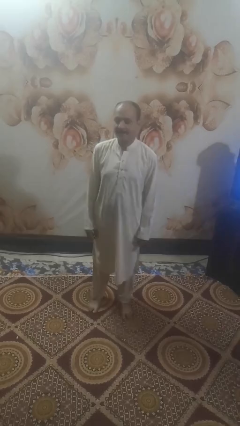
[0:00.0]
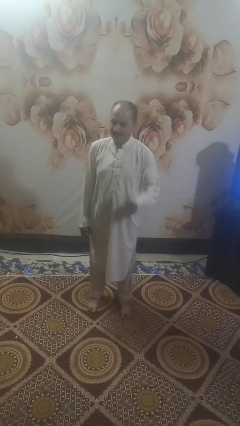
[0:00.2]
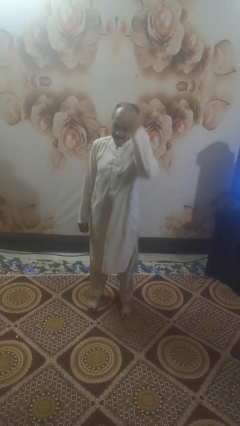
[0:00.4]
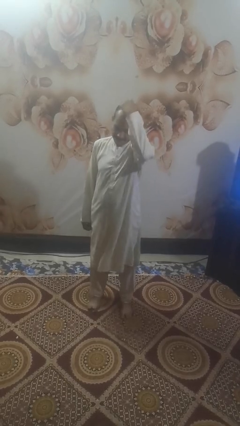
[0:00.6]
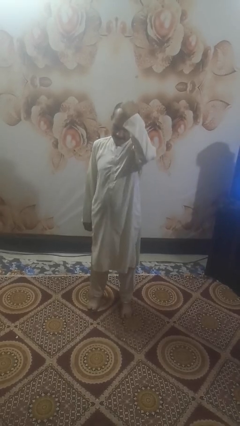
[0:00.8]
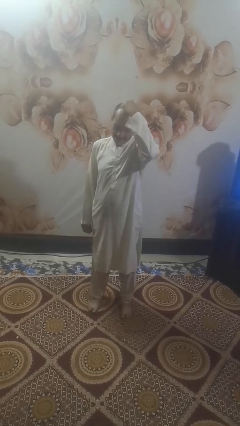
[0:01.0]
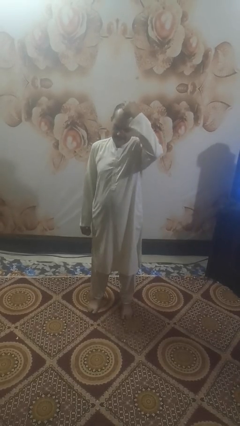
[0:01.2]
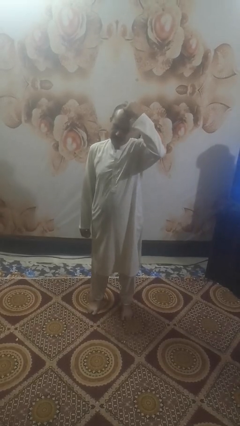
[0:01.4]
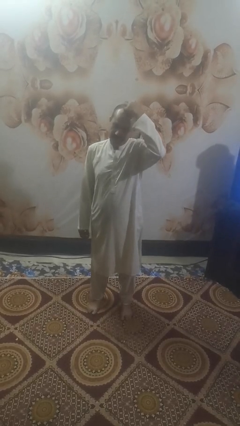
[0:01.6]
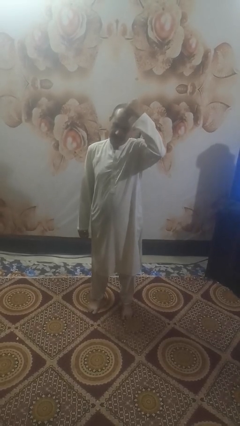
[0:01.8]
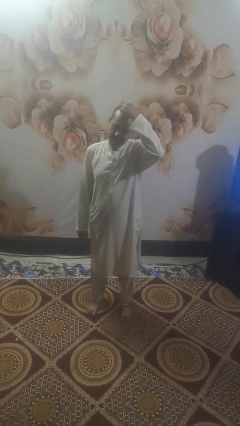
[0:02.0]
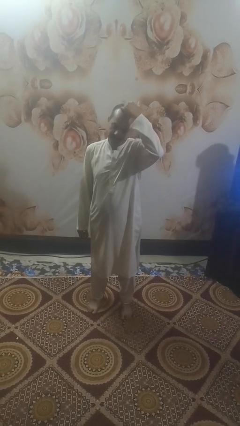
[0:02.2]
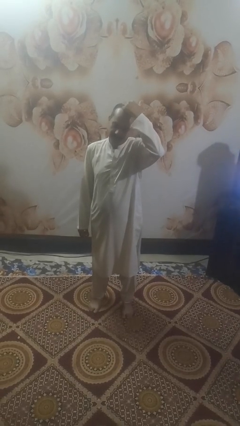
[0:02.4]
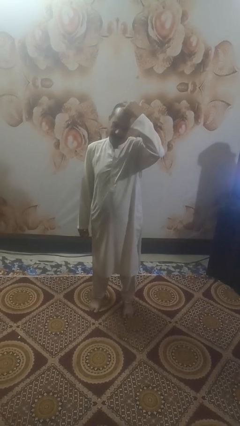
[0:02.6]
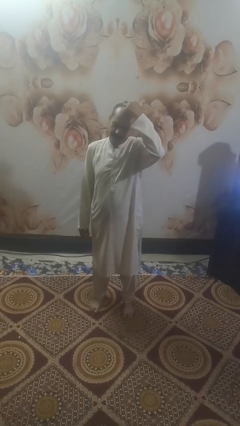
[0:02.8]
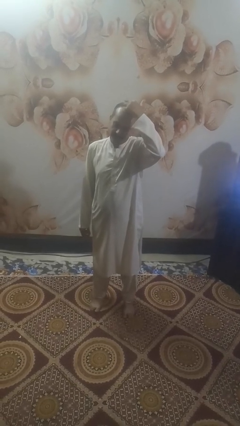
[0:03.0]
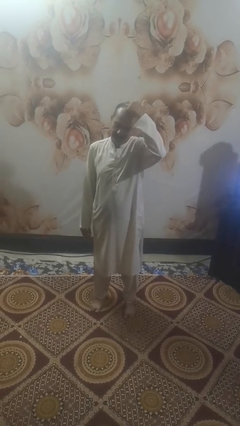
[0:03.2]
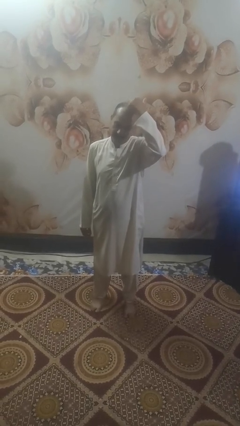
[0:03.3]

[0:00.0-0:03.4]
person scratches face

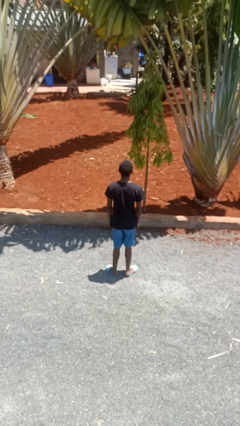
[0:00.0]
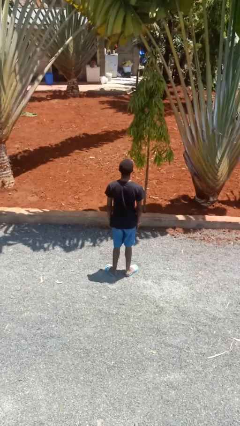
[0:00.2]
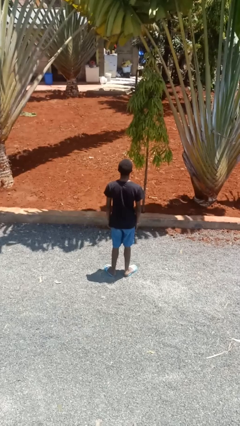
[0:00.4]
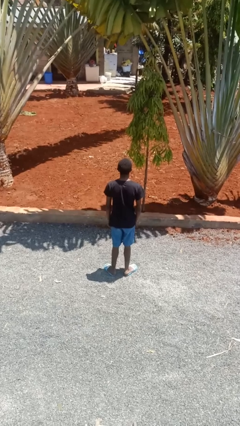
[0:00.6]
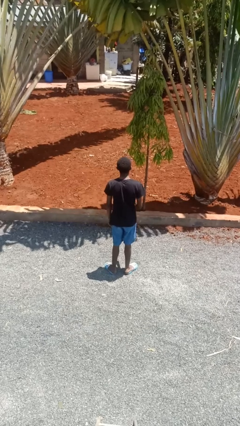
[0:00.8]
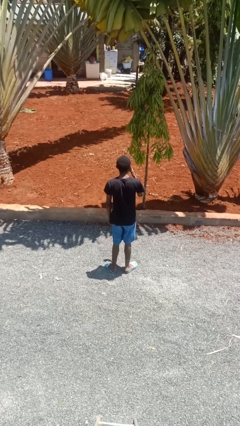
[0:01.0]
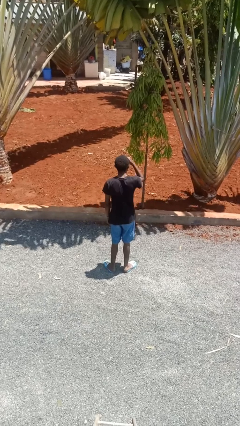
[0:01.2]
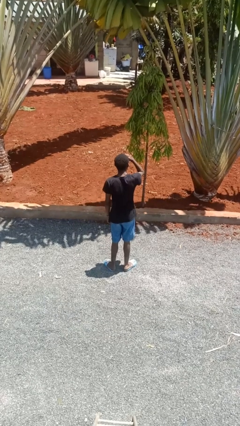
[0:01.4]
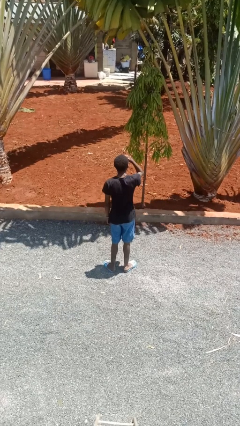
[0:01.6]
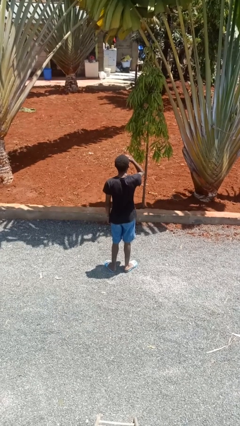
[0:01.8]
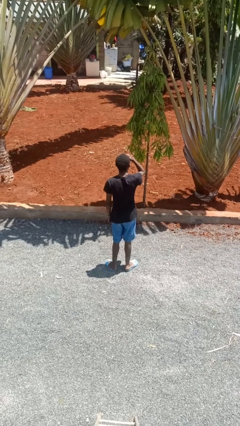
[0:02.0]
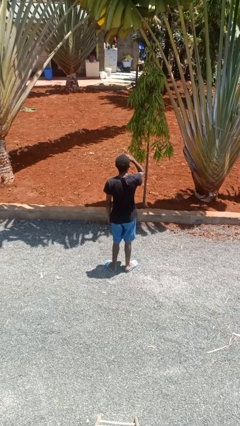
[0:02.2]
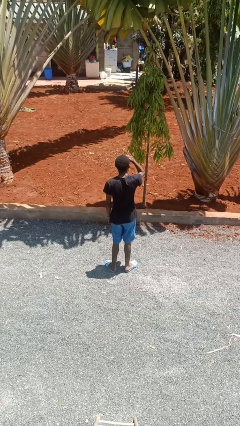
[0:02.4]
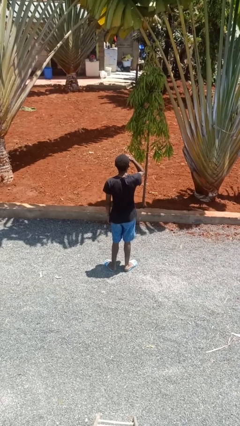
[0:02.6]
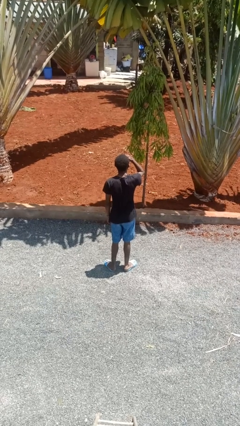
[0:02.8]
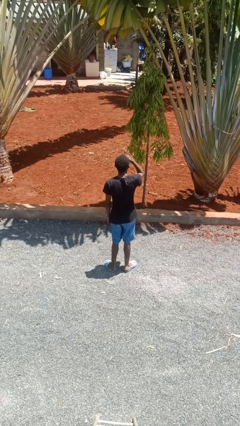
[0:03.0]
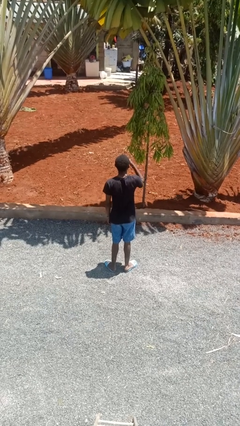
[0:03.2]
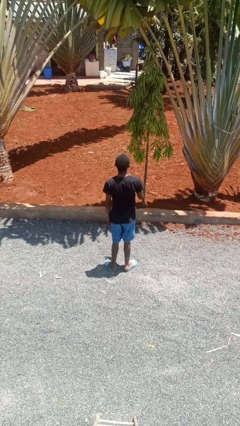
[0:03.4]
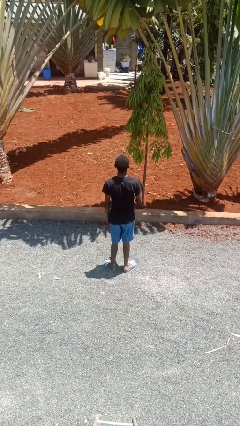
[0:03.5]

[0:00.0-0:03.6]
person shades eyes

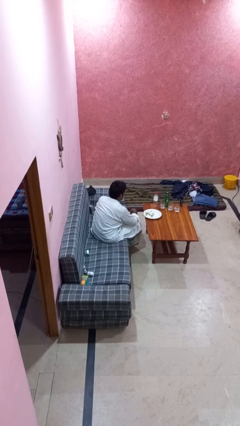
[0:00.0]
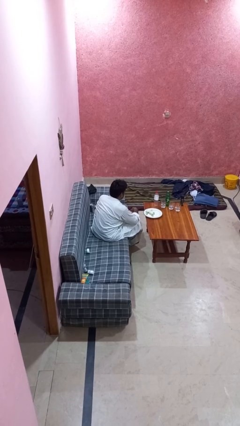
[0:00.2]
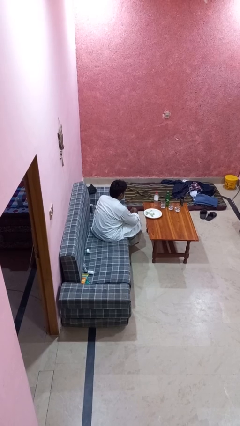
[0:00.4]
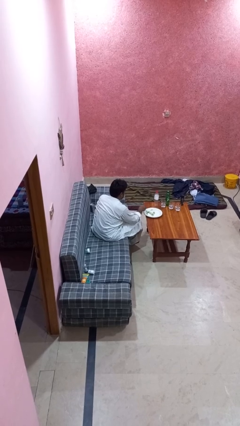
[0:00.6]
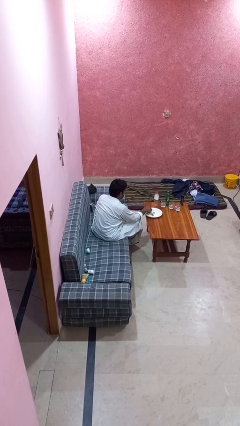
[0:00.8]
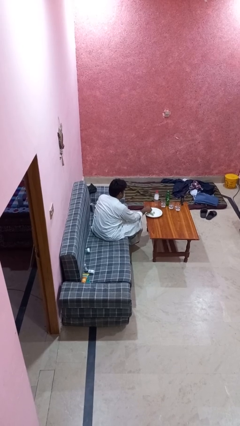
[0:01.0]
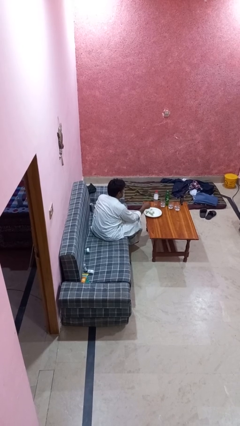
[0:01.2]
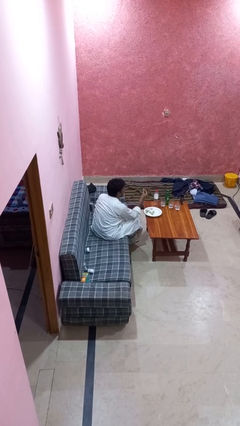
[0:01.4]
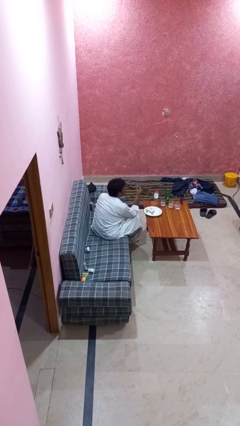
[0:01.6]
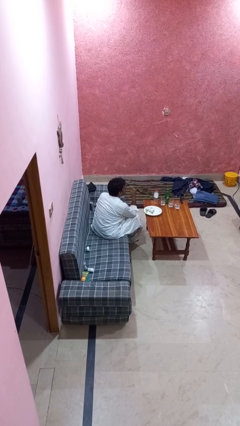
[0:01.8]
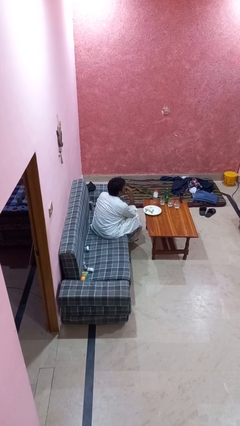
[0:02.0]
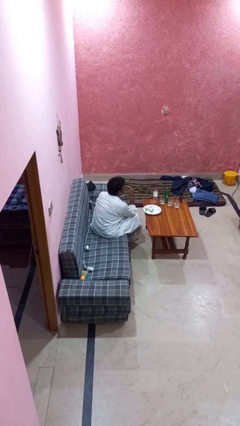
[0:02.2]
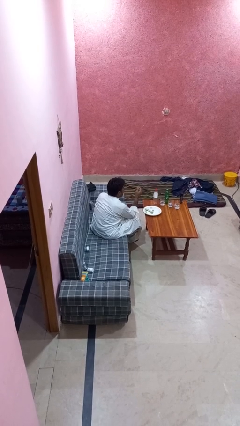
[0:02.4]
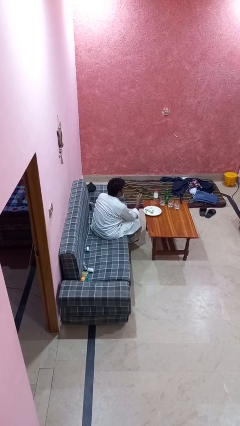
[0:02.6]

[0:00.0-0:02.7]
person eats with hands

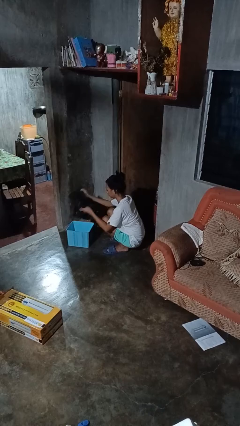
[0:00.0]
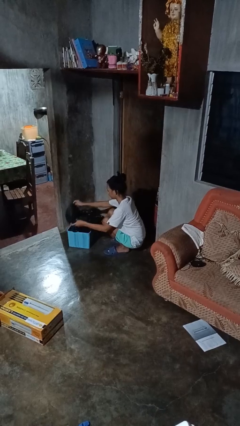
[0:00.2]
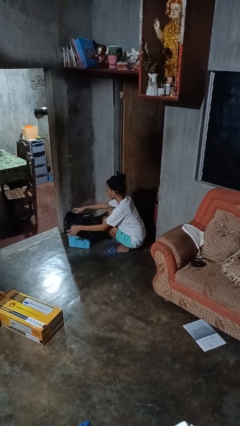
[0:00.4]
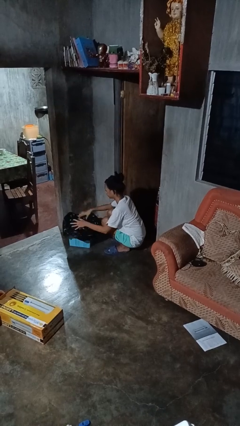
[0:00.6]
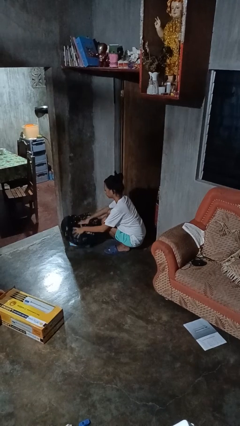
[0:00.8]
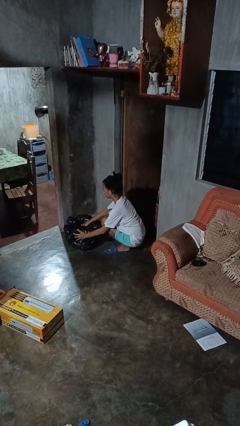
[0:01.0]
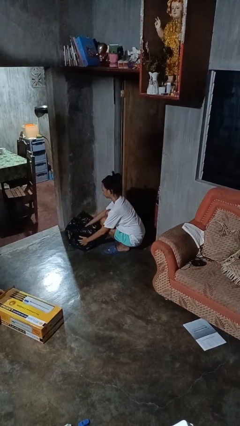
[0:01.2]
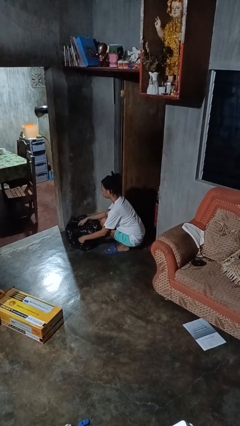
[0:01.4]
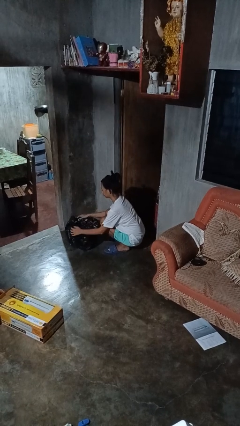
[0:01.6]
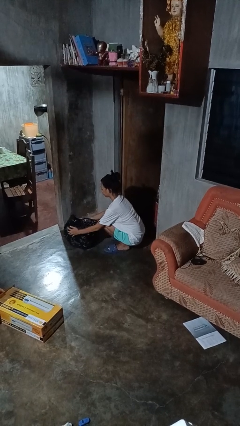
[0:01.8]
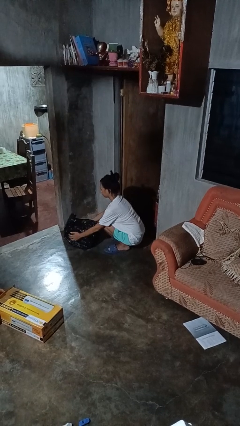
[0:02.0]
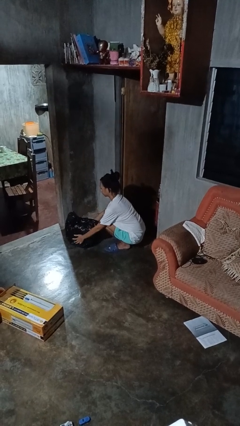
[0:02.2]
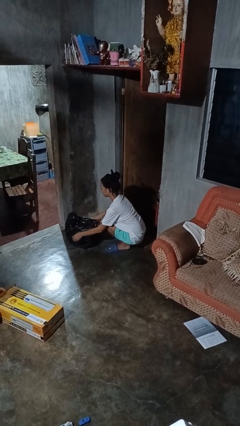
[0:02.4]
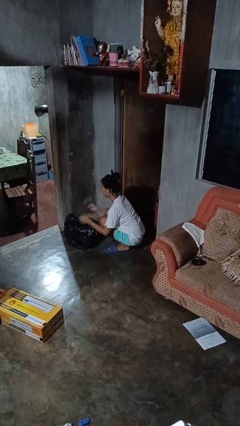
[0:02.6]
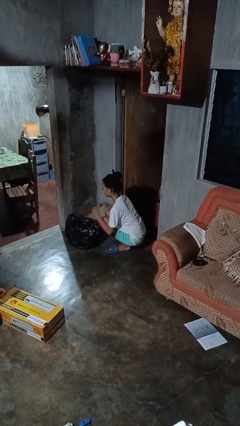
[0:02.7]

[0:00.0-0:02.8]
person inserts trashbag into trashcan

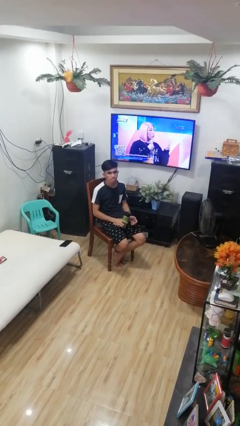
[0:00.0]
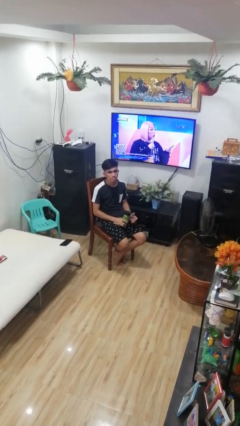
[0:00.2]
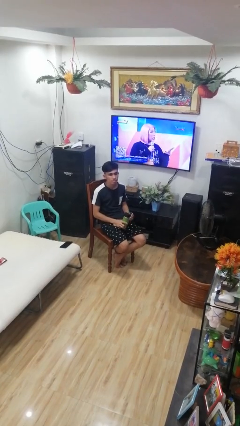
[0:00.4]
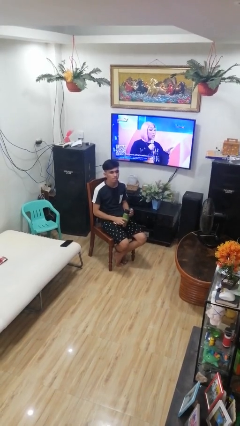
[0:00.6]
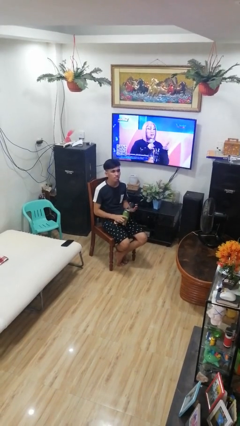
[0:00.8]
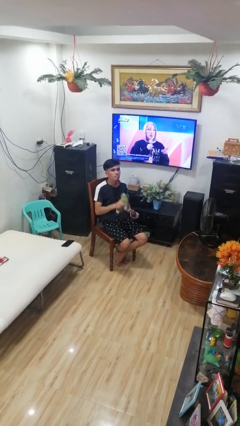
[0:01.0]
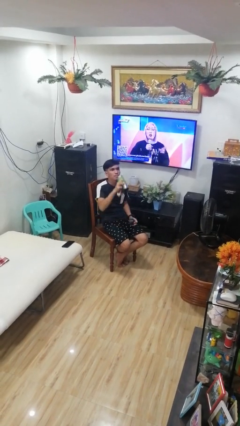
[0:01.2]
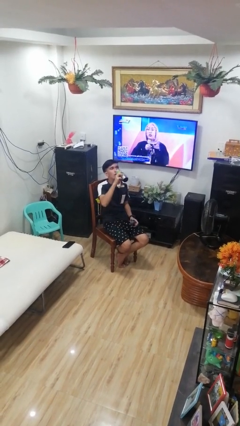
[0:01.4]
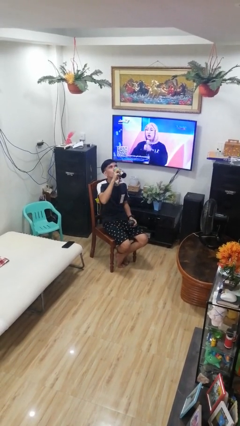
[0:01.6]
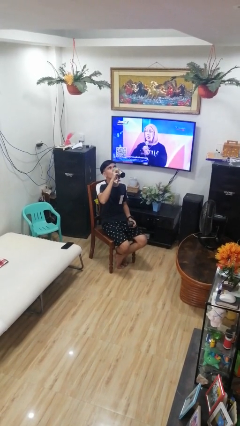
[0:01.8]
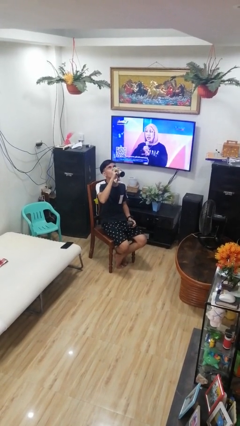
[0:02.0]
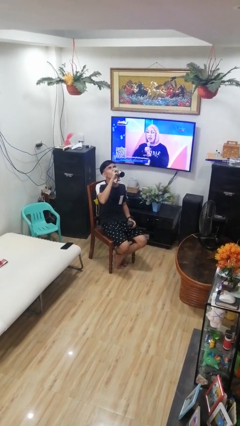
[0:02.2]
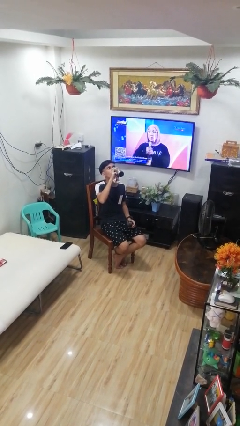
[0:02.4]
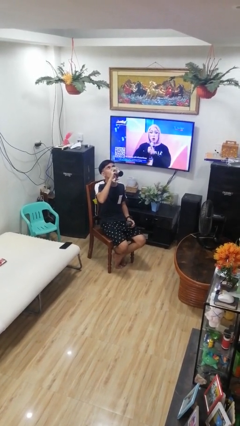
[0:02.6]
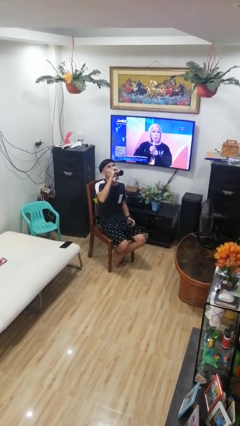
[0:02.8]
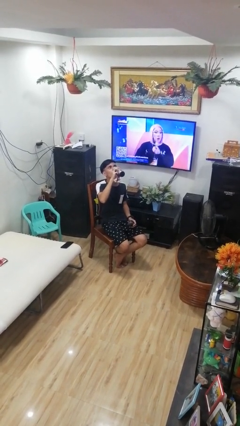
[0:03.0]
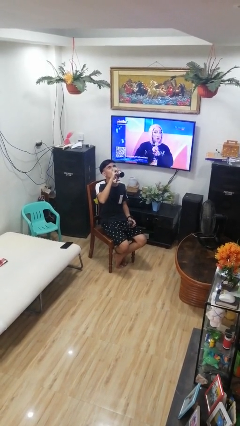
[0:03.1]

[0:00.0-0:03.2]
person drinks from bottle

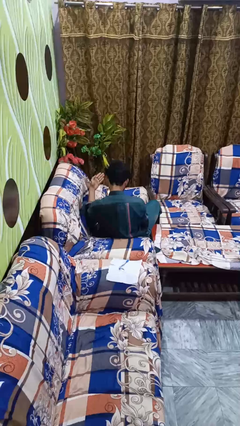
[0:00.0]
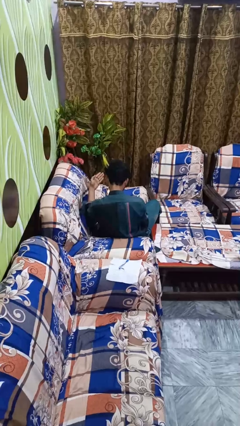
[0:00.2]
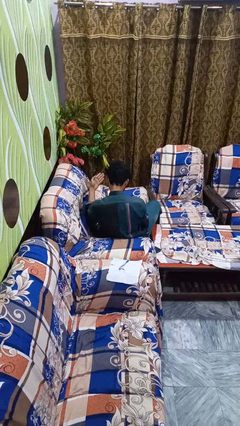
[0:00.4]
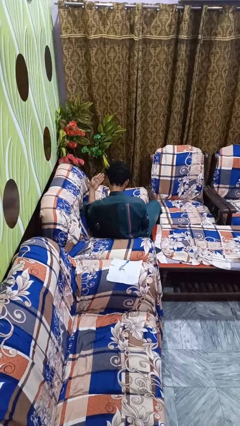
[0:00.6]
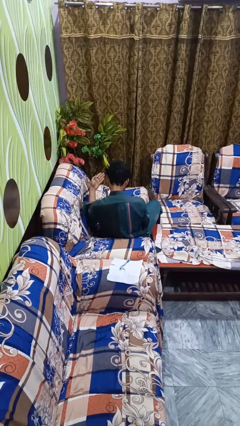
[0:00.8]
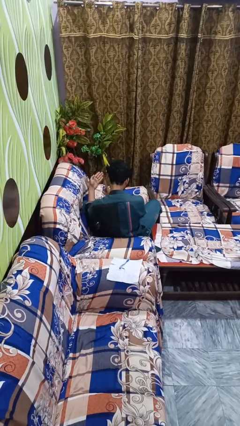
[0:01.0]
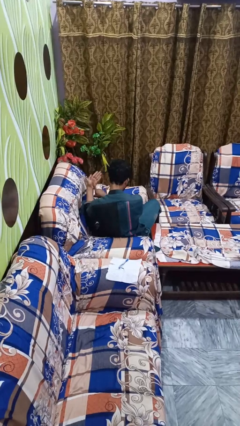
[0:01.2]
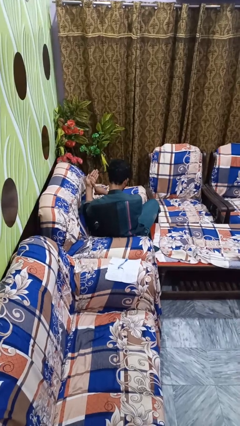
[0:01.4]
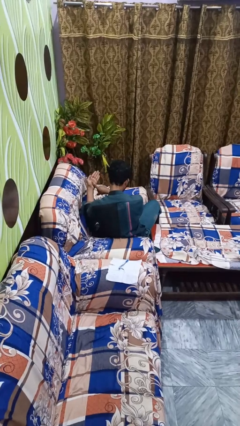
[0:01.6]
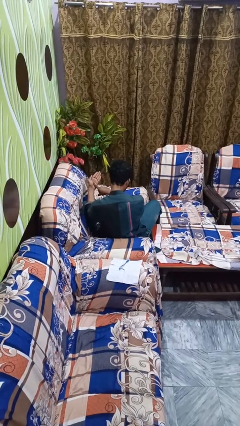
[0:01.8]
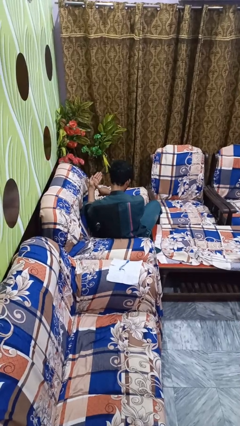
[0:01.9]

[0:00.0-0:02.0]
person gestures number one
